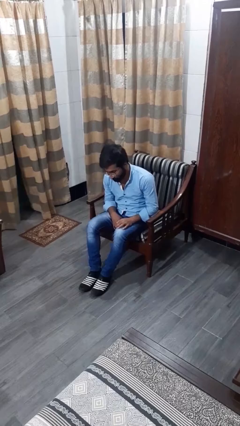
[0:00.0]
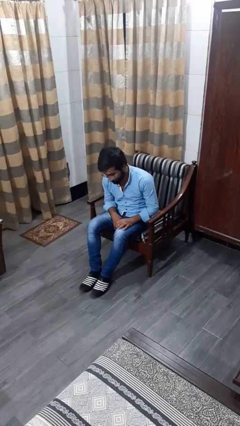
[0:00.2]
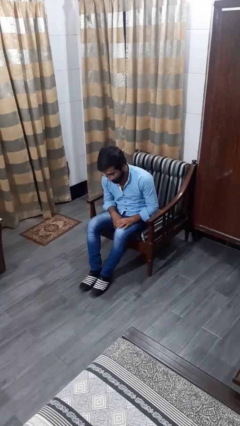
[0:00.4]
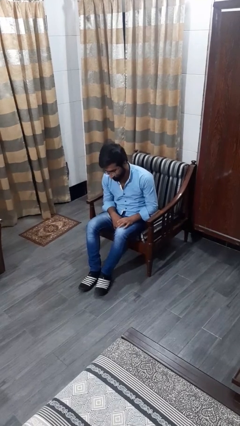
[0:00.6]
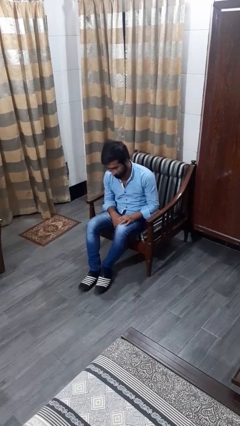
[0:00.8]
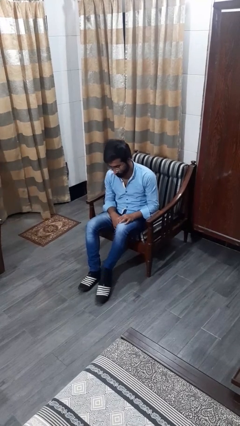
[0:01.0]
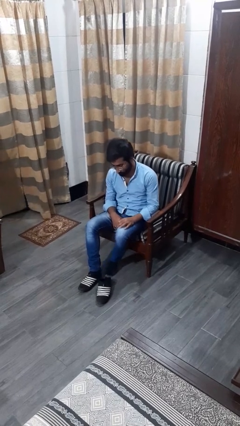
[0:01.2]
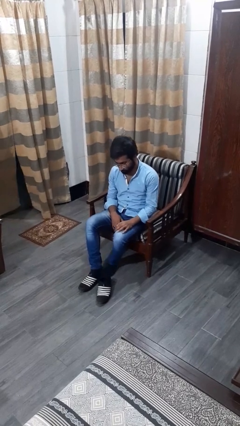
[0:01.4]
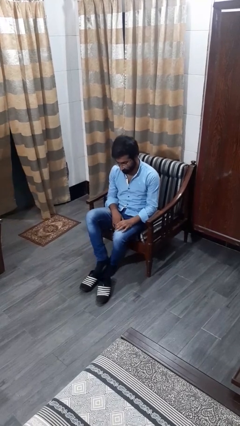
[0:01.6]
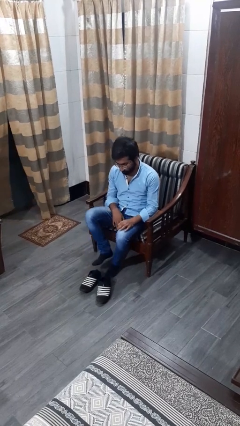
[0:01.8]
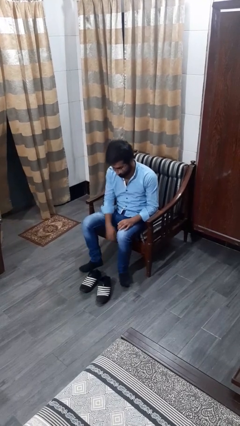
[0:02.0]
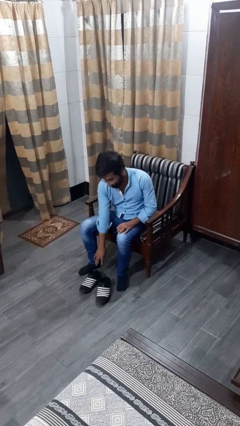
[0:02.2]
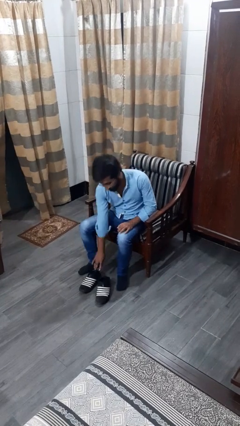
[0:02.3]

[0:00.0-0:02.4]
person takes off shoes

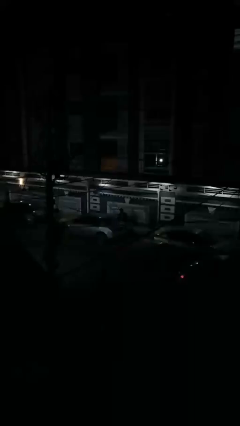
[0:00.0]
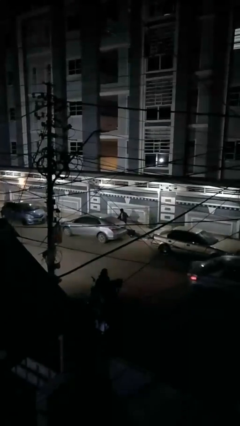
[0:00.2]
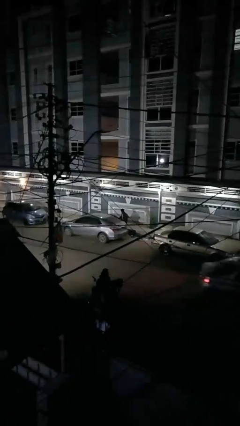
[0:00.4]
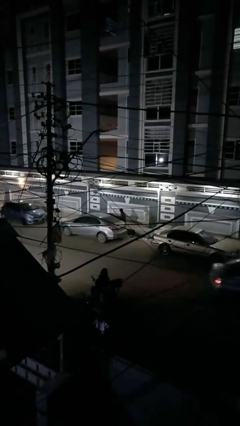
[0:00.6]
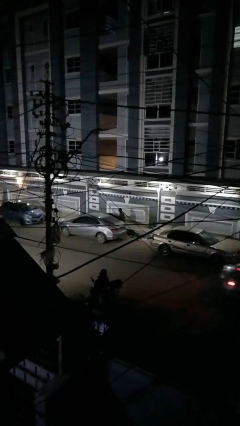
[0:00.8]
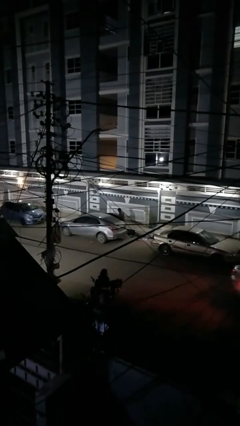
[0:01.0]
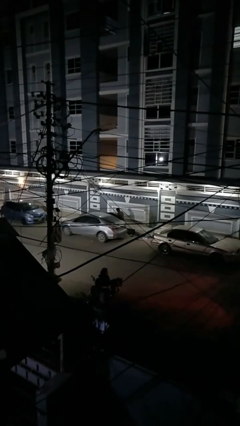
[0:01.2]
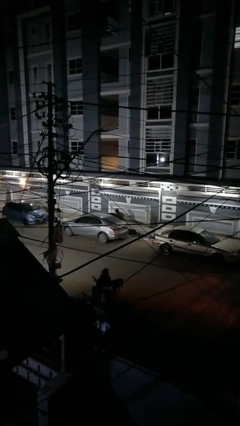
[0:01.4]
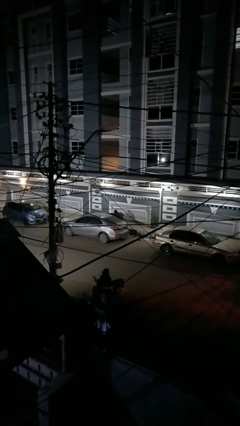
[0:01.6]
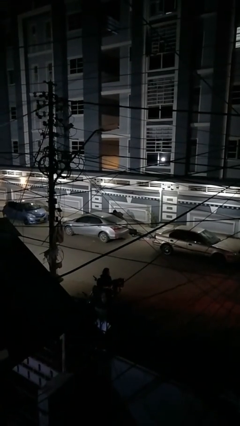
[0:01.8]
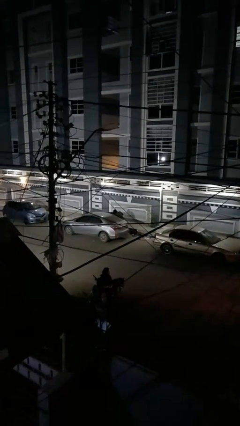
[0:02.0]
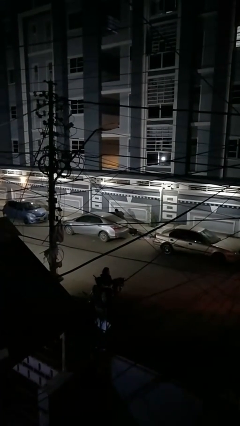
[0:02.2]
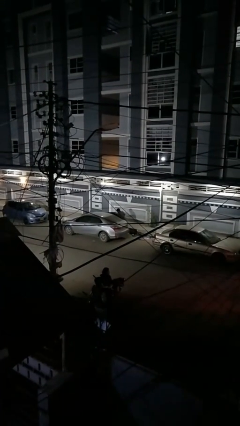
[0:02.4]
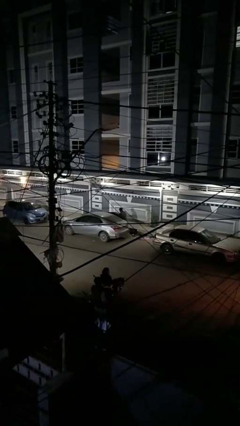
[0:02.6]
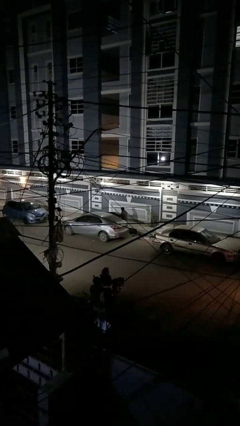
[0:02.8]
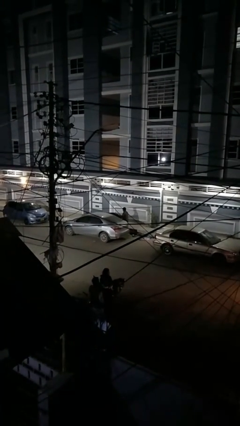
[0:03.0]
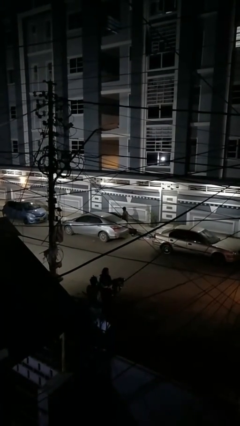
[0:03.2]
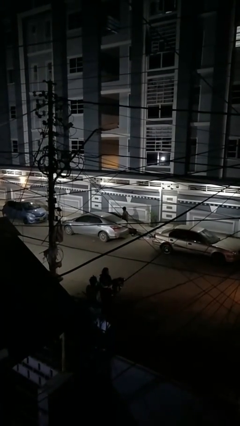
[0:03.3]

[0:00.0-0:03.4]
person loads car

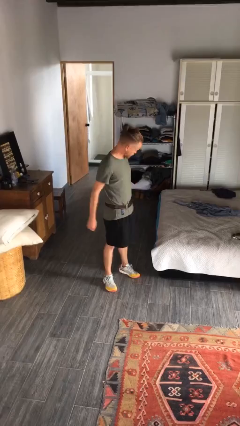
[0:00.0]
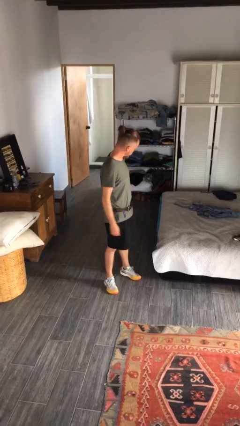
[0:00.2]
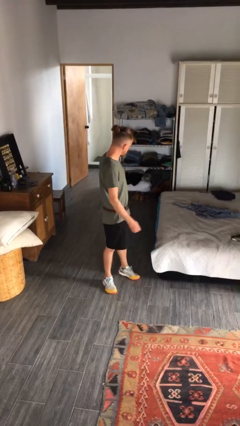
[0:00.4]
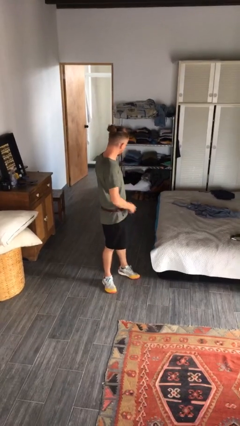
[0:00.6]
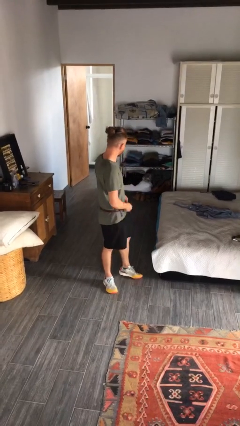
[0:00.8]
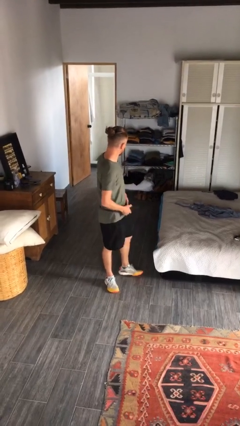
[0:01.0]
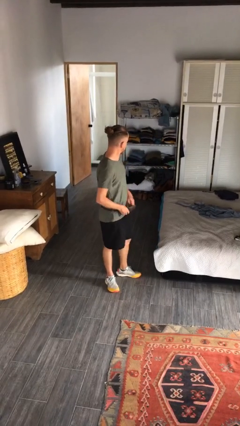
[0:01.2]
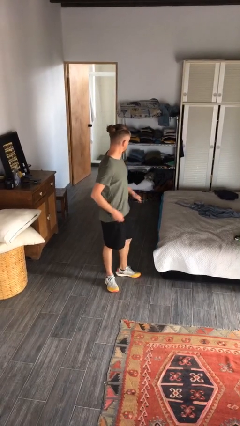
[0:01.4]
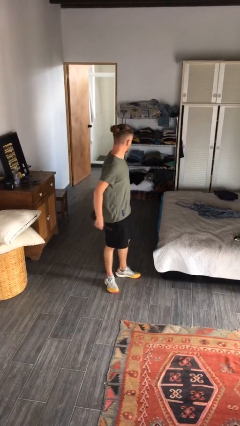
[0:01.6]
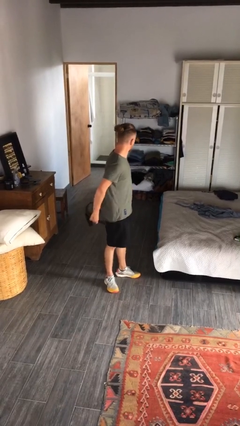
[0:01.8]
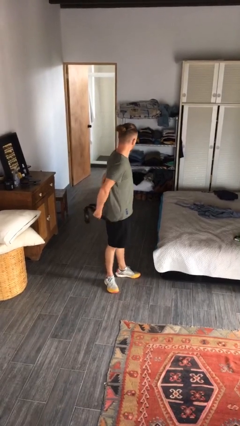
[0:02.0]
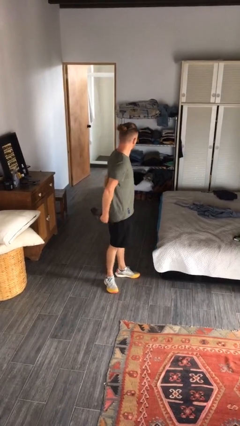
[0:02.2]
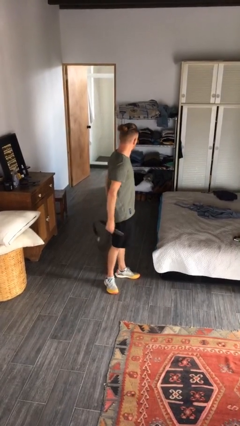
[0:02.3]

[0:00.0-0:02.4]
person takes off belt

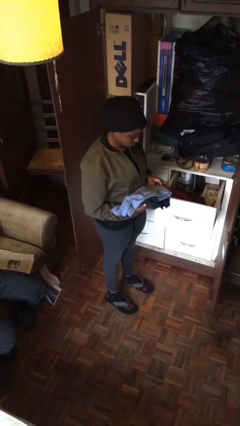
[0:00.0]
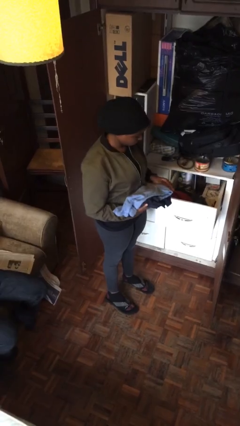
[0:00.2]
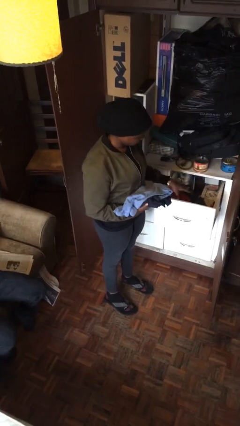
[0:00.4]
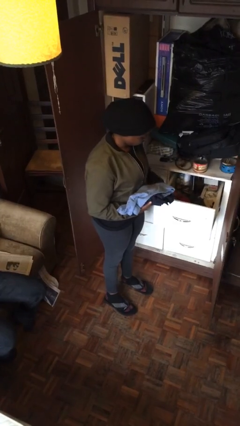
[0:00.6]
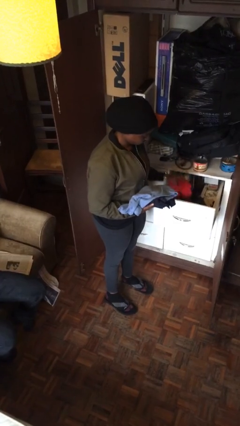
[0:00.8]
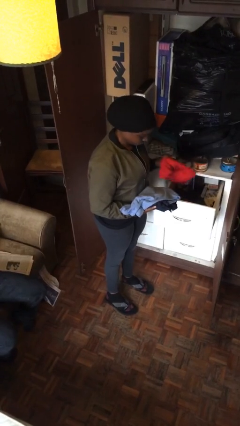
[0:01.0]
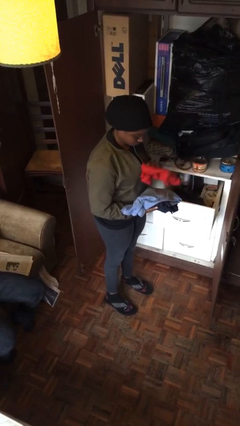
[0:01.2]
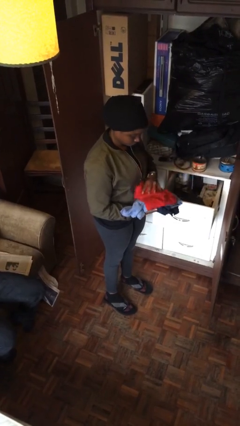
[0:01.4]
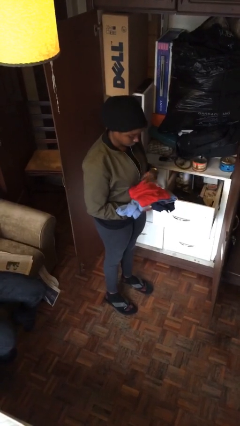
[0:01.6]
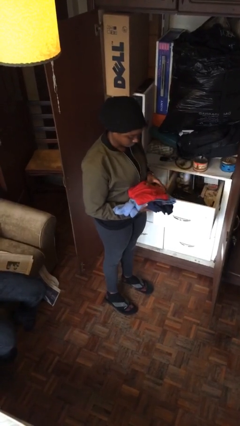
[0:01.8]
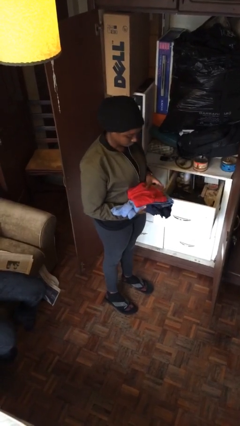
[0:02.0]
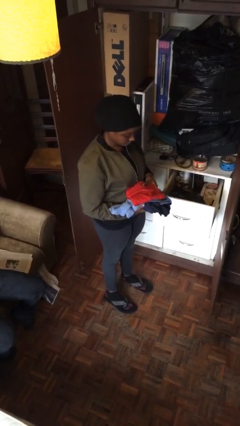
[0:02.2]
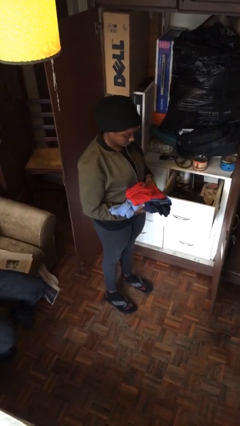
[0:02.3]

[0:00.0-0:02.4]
person takes clothes from dresser

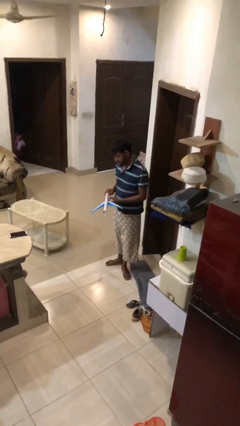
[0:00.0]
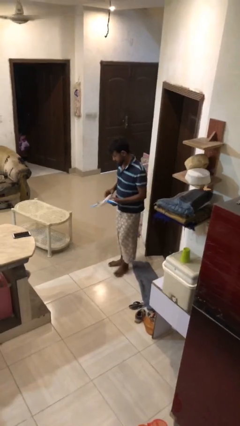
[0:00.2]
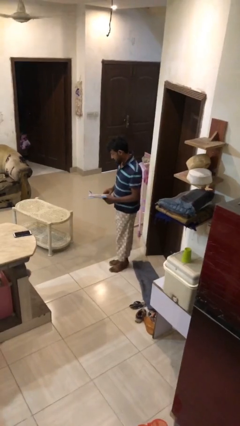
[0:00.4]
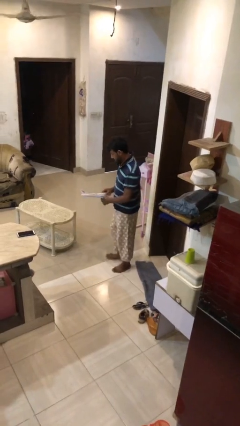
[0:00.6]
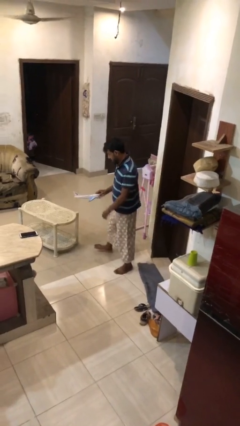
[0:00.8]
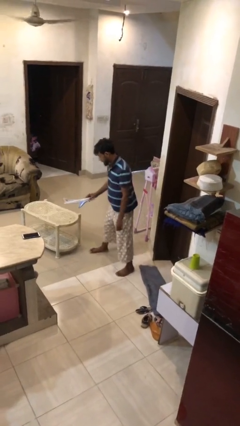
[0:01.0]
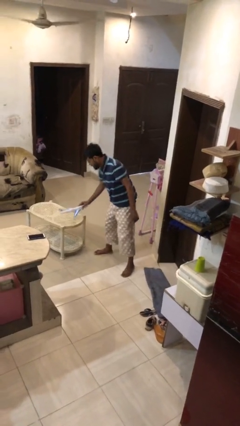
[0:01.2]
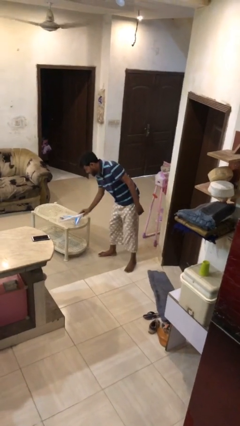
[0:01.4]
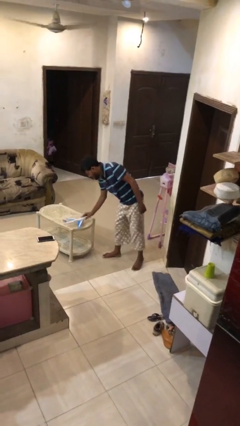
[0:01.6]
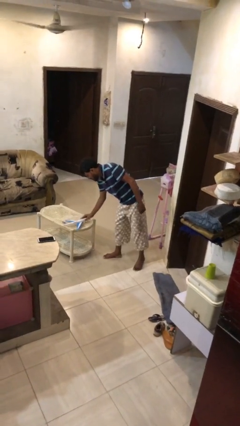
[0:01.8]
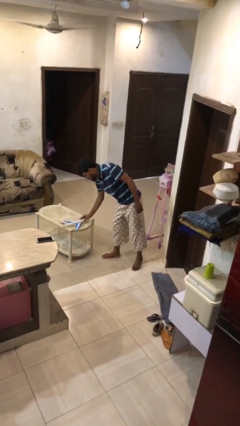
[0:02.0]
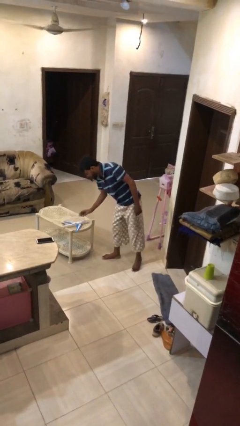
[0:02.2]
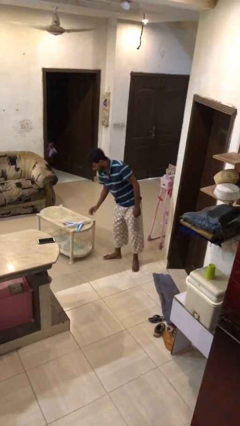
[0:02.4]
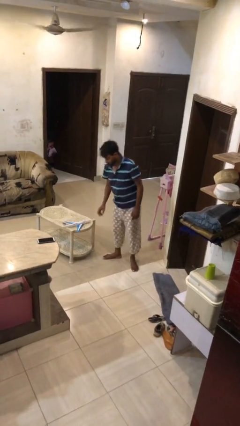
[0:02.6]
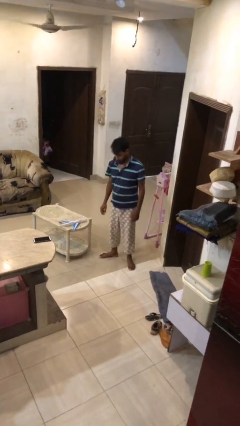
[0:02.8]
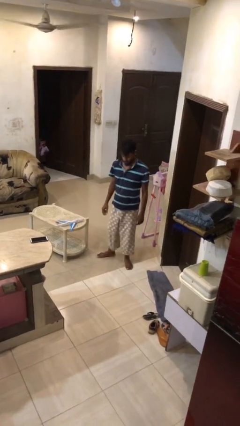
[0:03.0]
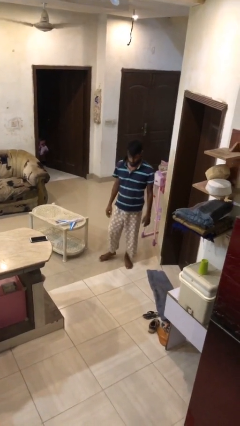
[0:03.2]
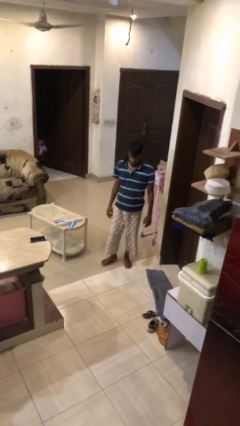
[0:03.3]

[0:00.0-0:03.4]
person puts down object on table

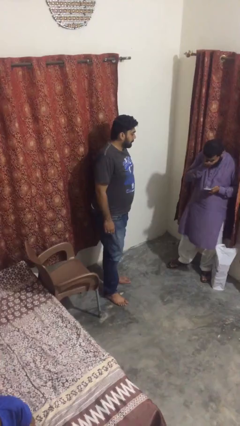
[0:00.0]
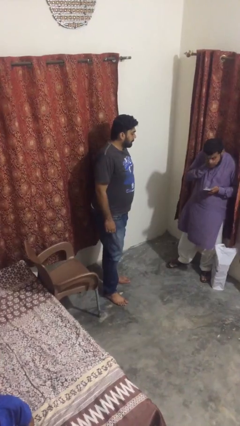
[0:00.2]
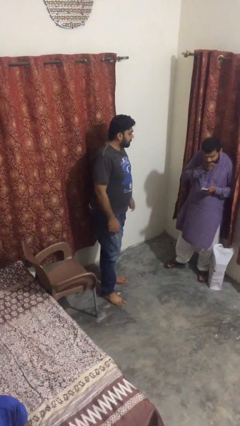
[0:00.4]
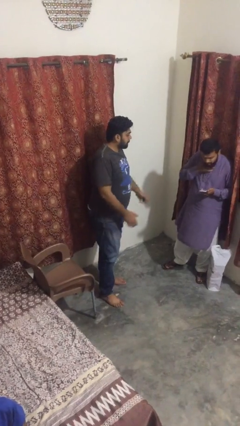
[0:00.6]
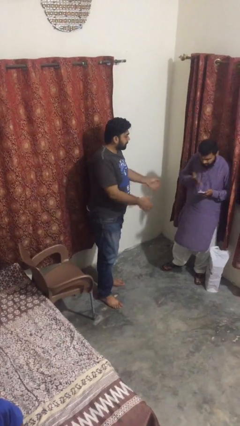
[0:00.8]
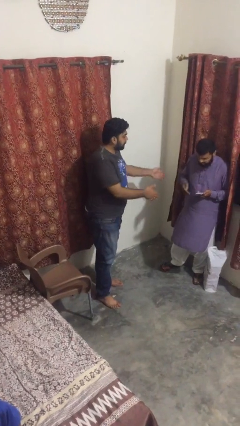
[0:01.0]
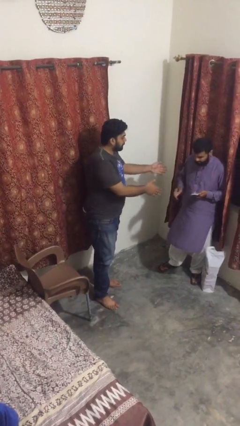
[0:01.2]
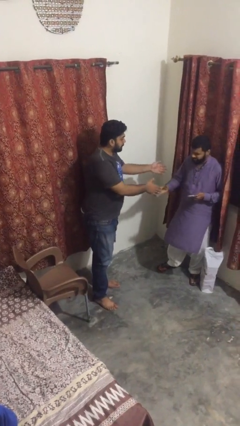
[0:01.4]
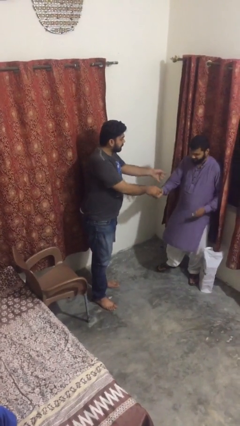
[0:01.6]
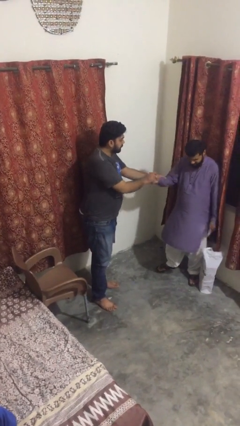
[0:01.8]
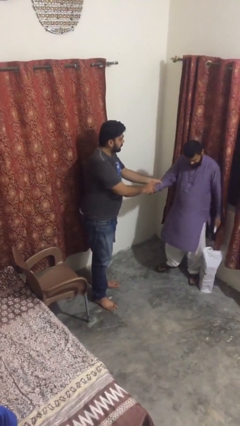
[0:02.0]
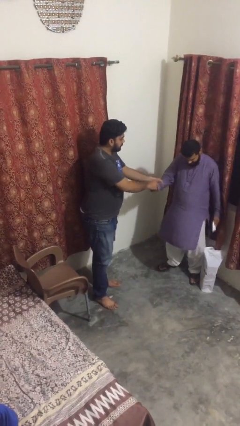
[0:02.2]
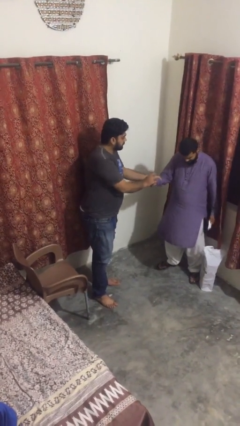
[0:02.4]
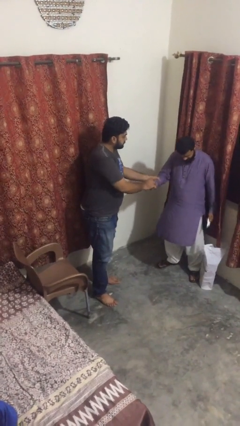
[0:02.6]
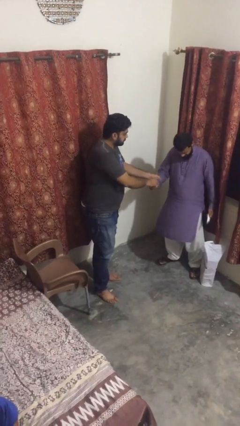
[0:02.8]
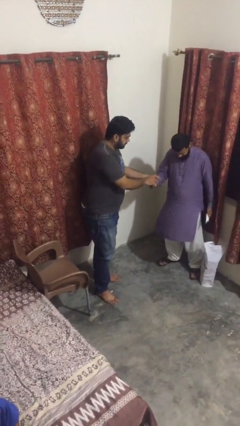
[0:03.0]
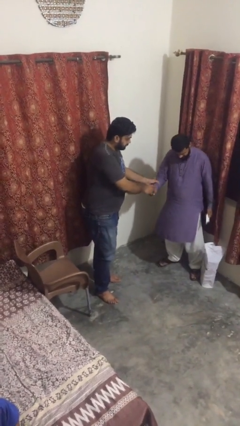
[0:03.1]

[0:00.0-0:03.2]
person shakes hand

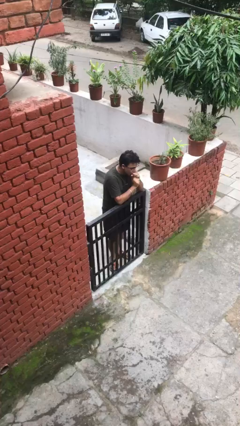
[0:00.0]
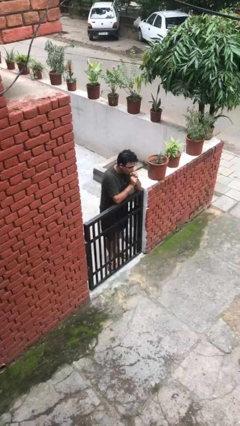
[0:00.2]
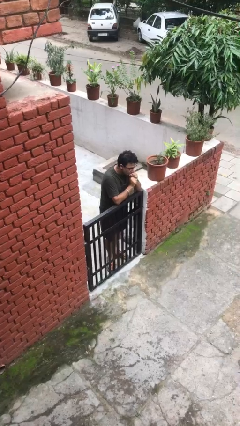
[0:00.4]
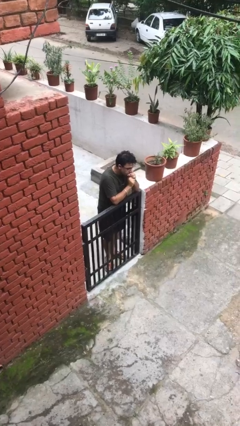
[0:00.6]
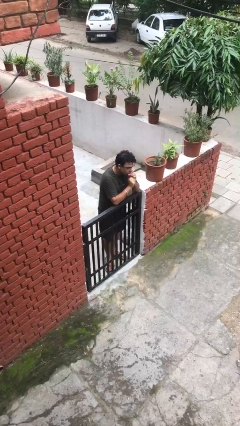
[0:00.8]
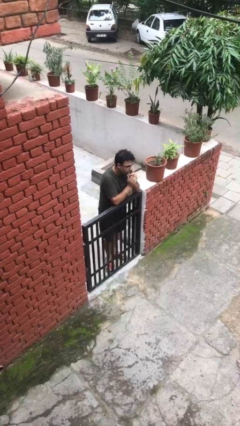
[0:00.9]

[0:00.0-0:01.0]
person blows into hands
